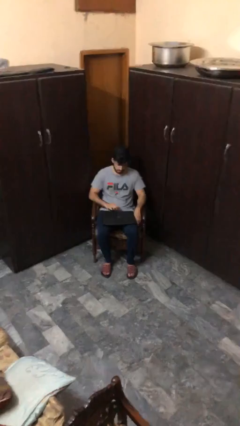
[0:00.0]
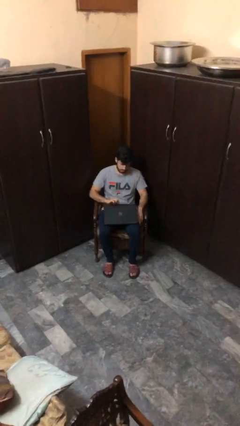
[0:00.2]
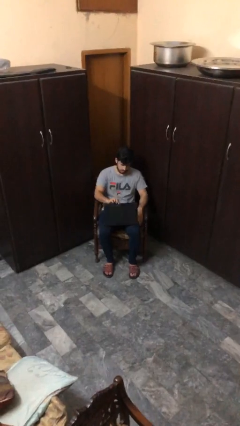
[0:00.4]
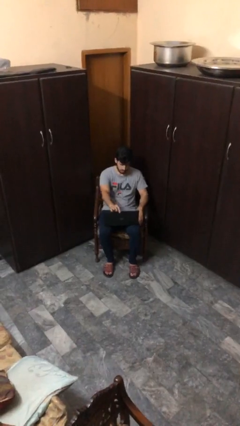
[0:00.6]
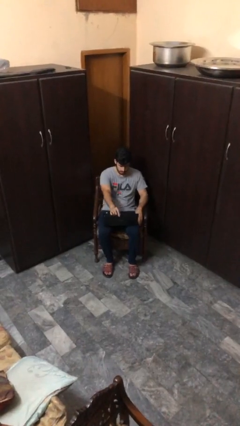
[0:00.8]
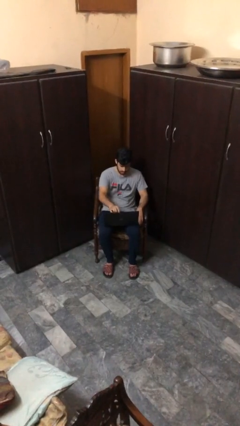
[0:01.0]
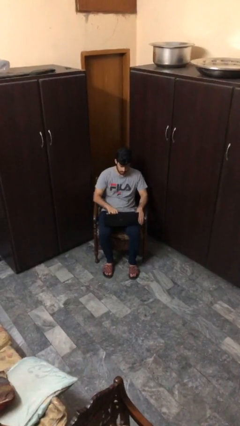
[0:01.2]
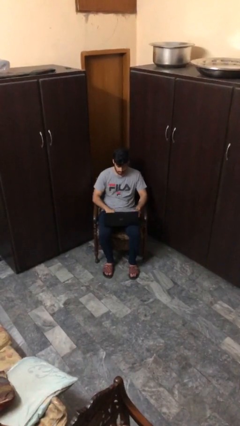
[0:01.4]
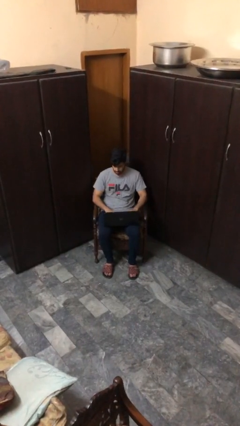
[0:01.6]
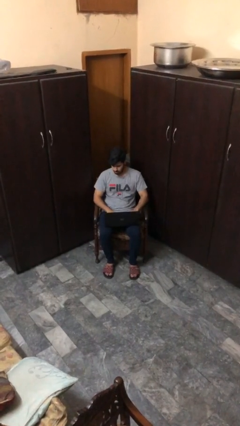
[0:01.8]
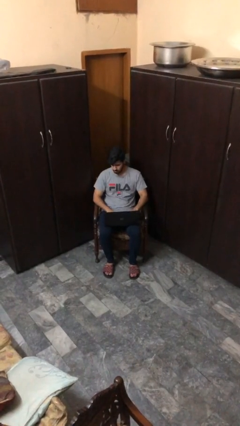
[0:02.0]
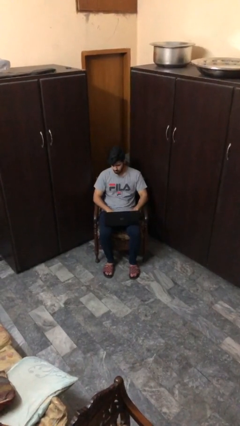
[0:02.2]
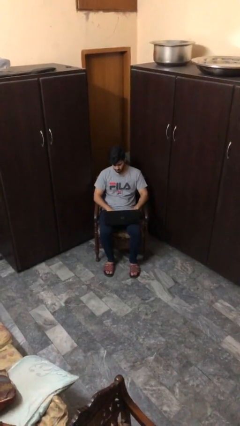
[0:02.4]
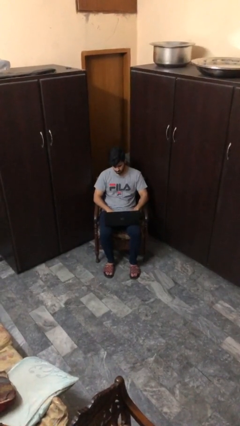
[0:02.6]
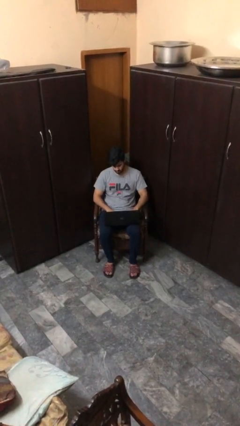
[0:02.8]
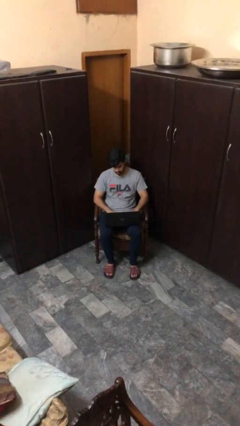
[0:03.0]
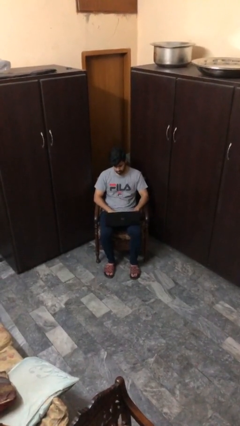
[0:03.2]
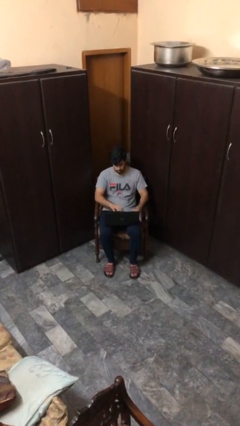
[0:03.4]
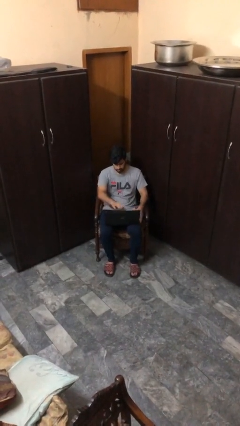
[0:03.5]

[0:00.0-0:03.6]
person opens laptop

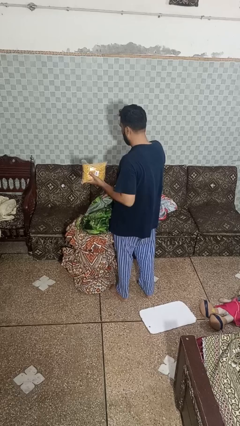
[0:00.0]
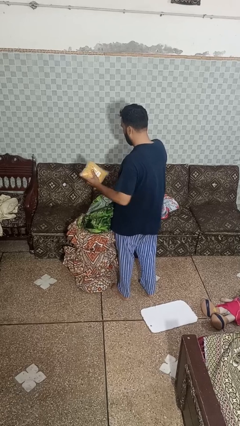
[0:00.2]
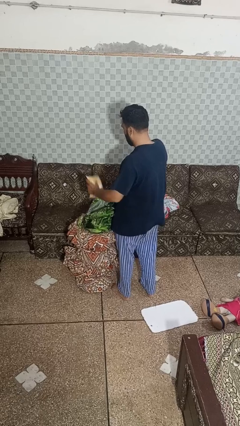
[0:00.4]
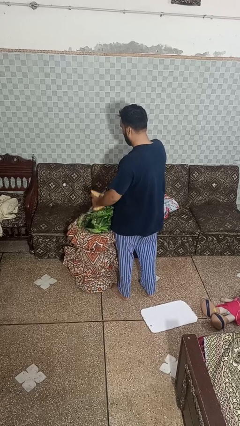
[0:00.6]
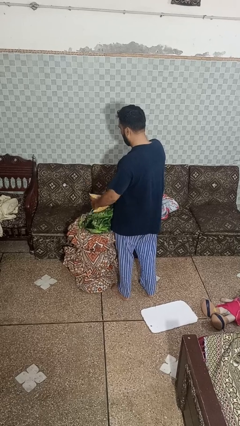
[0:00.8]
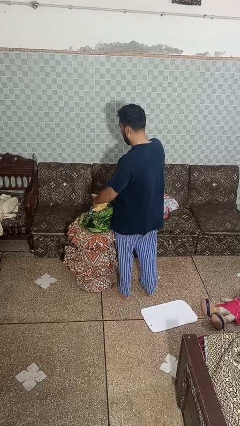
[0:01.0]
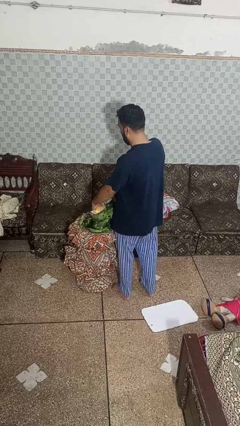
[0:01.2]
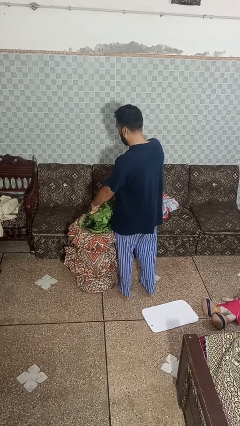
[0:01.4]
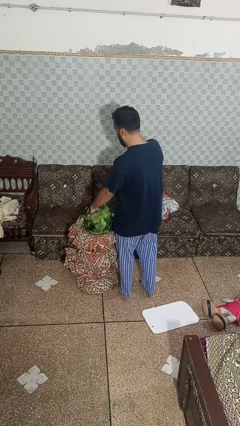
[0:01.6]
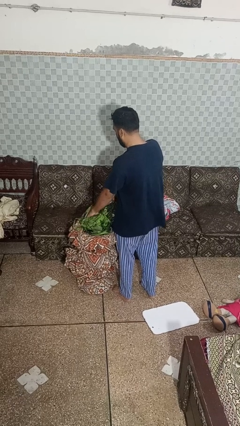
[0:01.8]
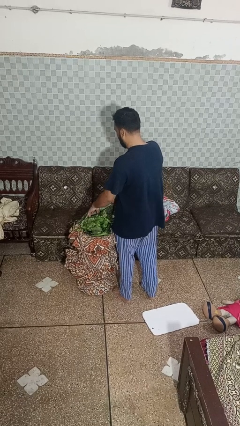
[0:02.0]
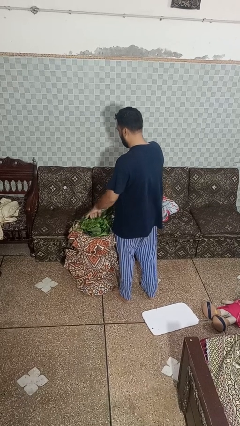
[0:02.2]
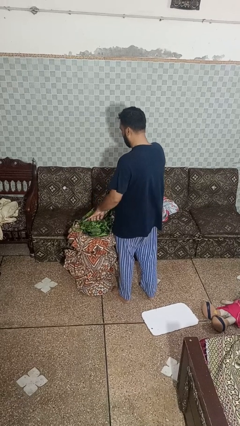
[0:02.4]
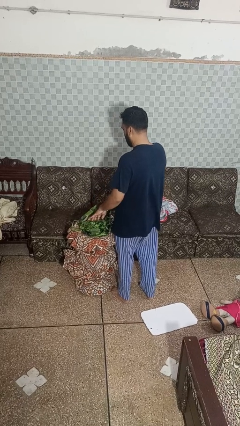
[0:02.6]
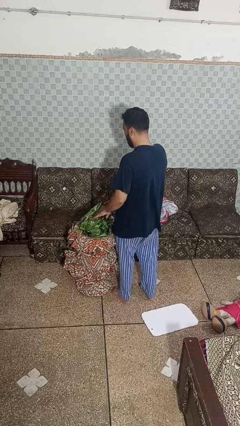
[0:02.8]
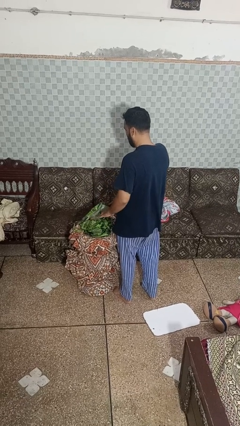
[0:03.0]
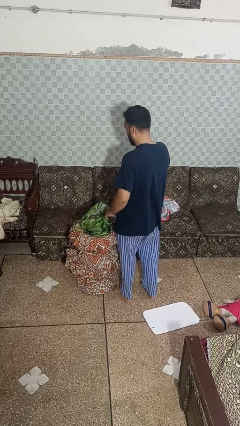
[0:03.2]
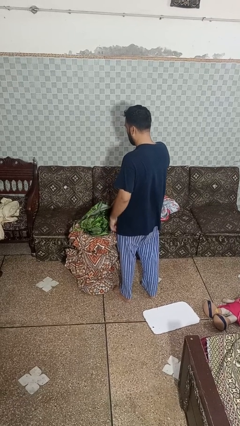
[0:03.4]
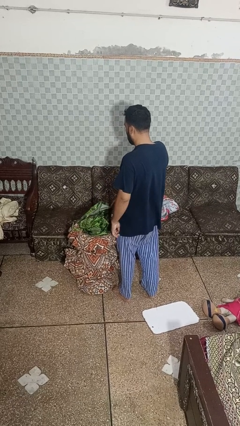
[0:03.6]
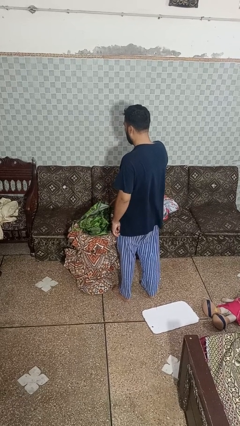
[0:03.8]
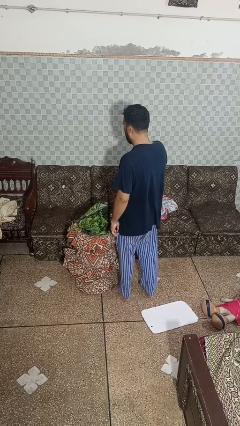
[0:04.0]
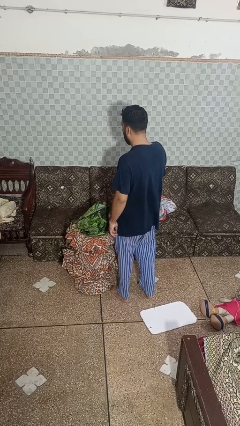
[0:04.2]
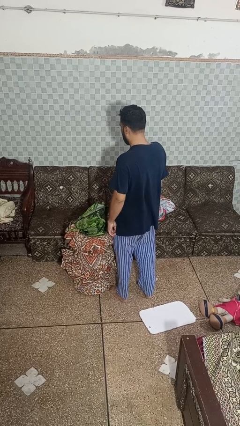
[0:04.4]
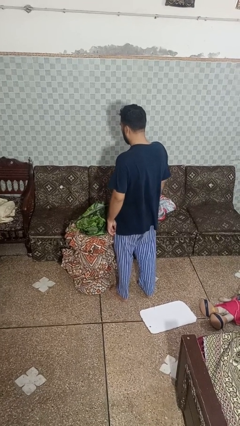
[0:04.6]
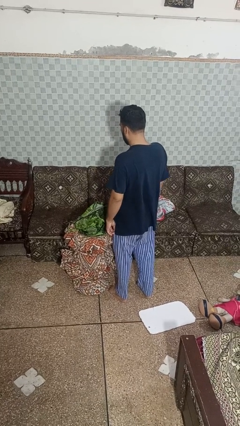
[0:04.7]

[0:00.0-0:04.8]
person puts object into bag

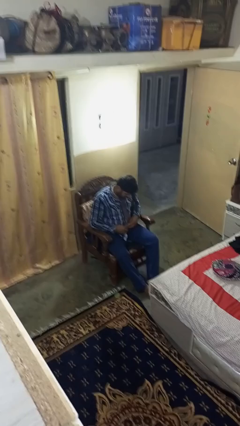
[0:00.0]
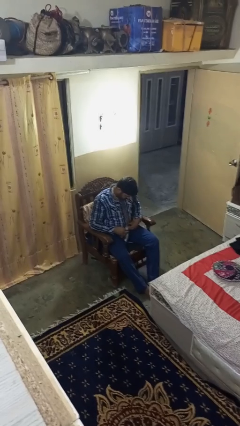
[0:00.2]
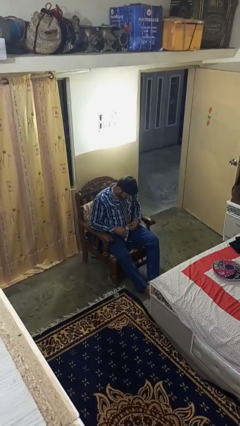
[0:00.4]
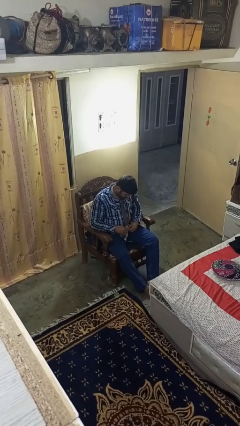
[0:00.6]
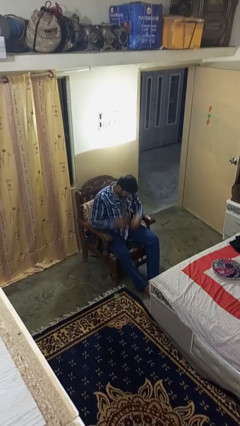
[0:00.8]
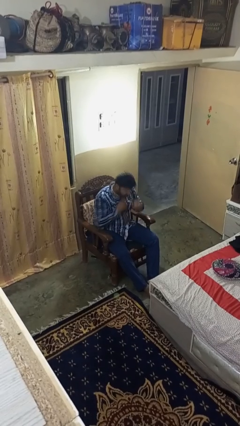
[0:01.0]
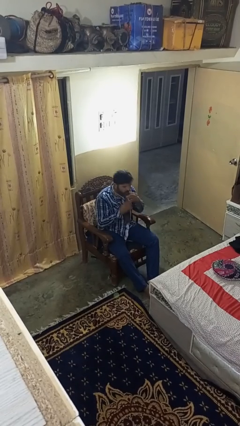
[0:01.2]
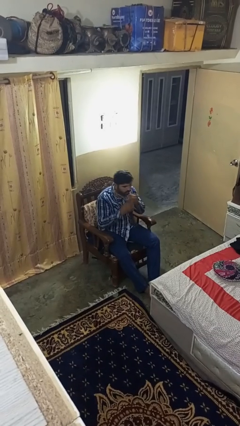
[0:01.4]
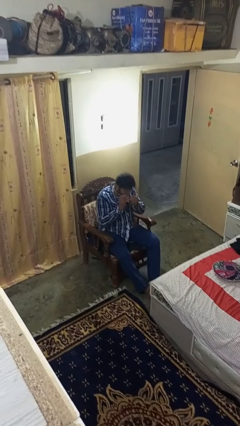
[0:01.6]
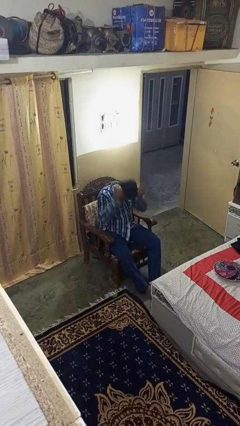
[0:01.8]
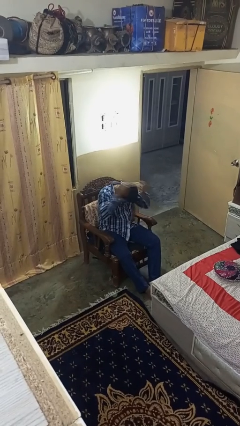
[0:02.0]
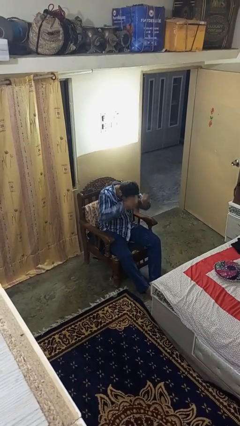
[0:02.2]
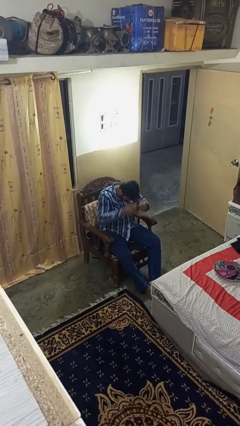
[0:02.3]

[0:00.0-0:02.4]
person takes off necktie

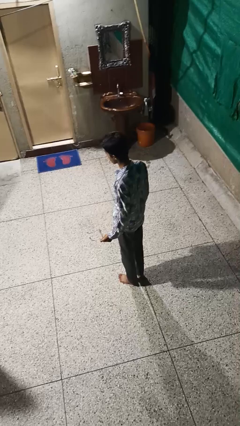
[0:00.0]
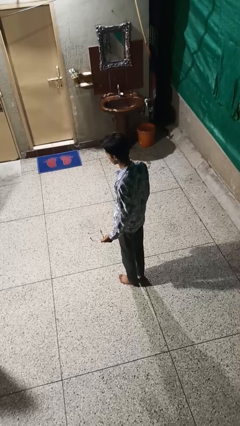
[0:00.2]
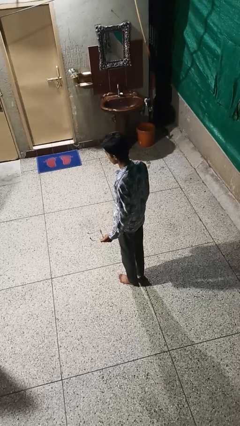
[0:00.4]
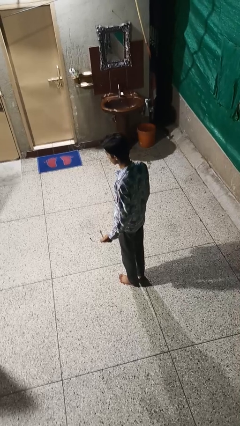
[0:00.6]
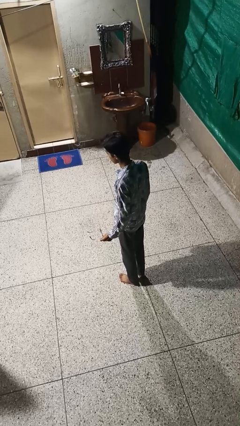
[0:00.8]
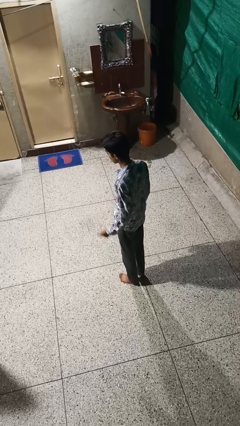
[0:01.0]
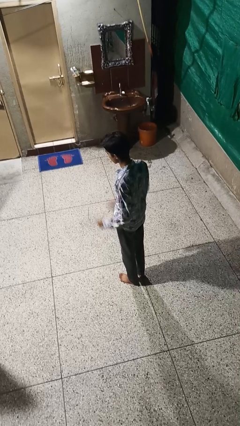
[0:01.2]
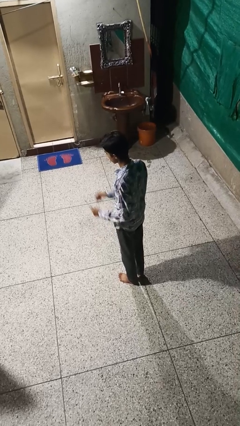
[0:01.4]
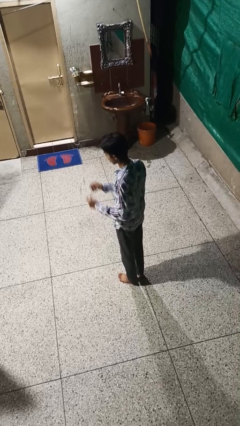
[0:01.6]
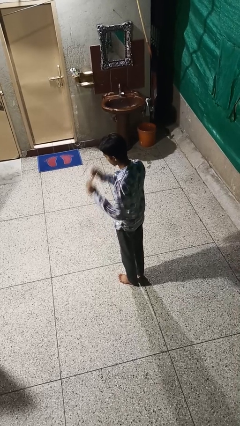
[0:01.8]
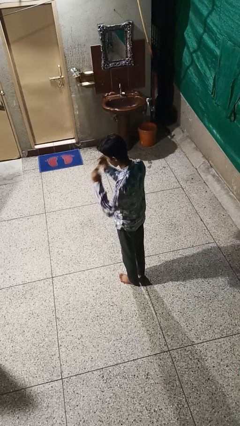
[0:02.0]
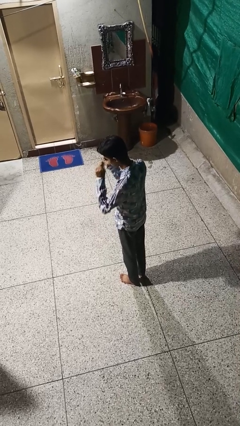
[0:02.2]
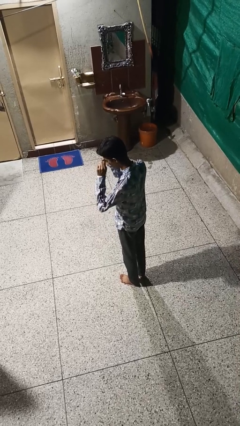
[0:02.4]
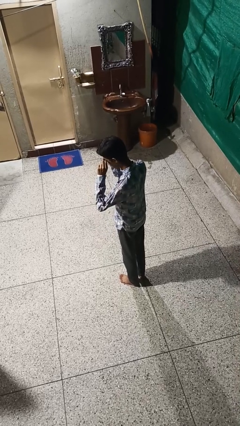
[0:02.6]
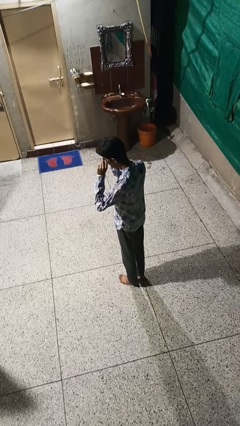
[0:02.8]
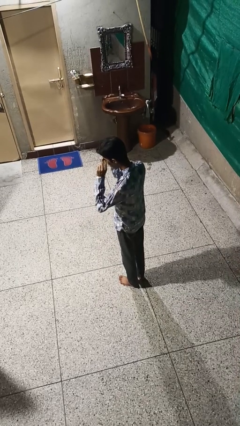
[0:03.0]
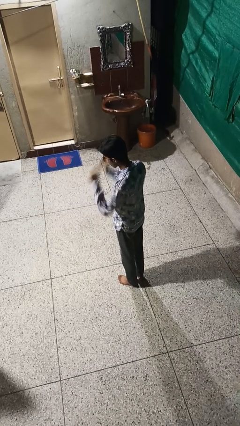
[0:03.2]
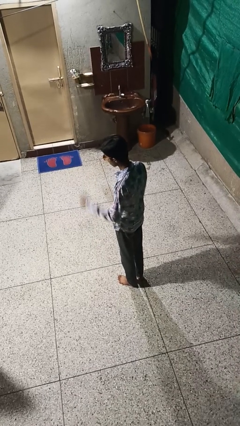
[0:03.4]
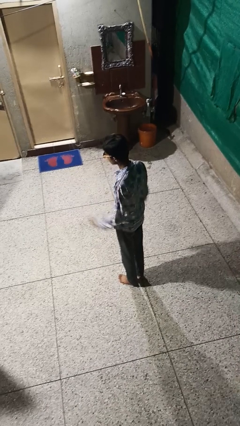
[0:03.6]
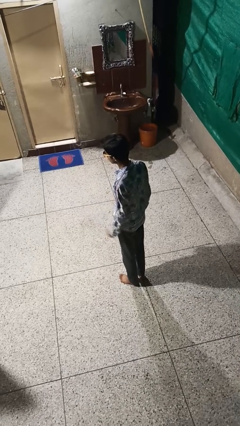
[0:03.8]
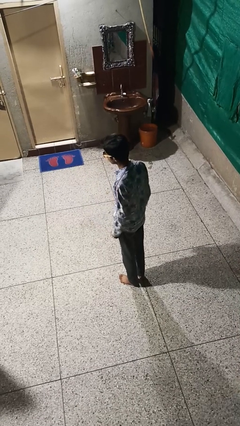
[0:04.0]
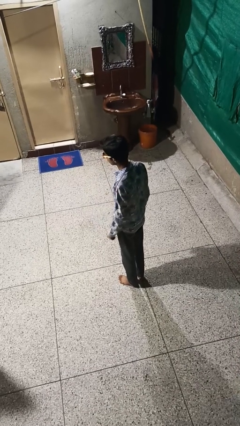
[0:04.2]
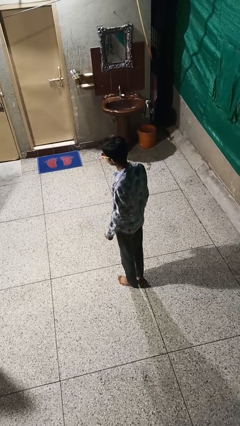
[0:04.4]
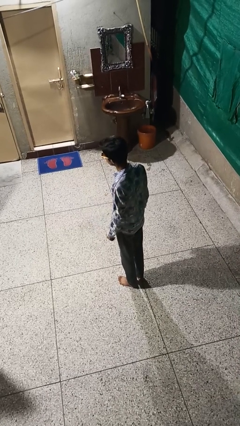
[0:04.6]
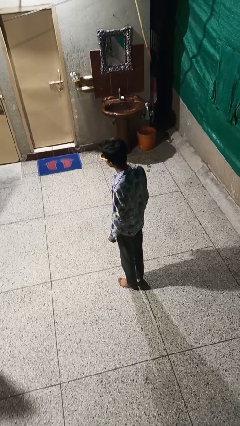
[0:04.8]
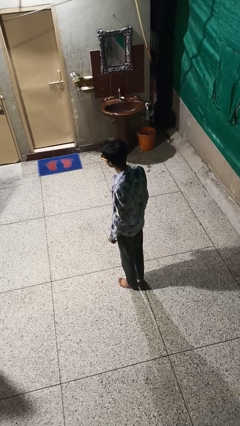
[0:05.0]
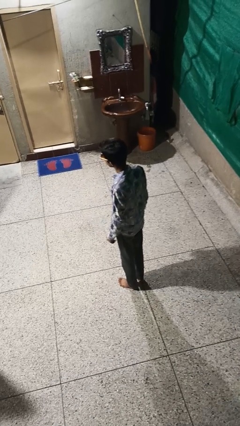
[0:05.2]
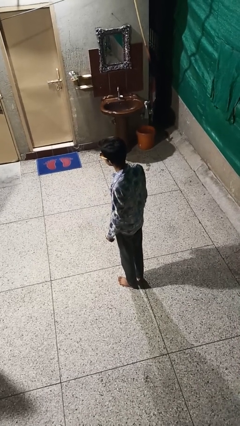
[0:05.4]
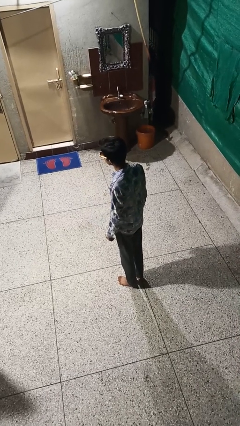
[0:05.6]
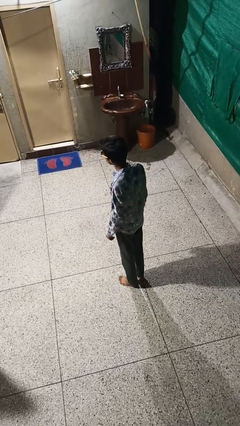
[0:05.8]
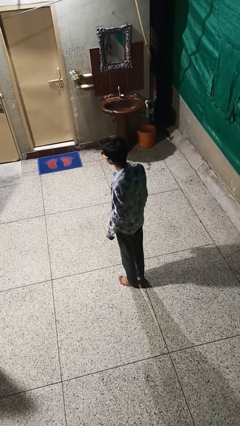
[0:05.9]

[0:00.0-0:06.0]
person puts on sunglasses

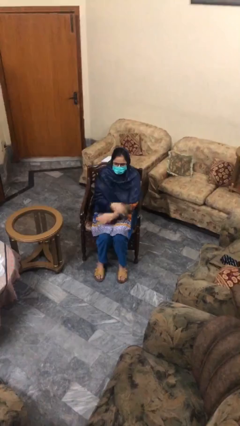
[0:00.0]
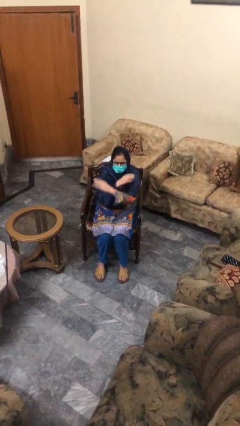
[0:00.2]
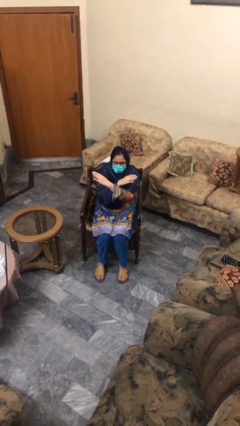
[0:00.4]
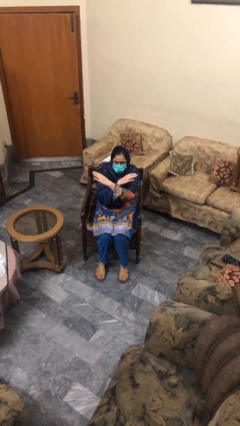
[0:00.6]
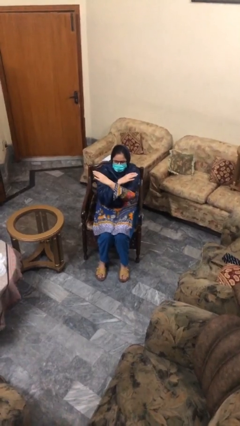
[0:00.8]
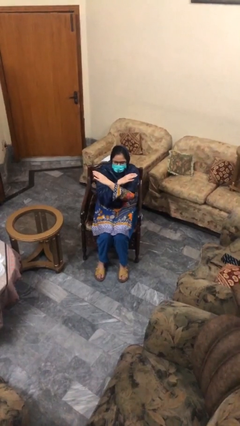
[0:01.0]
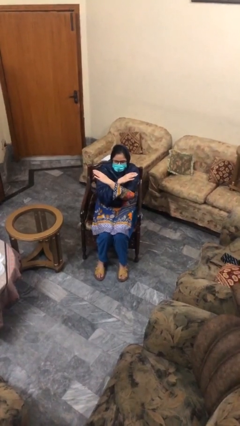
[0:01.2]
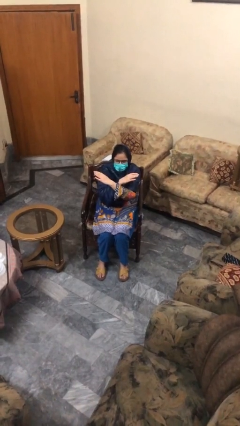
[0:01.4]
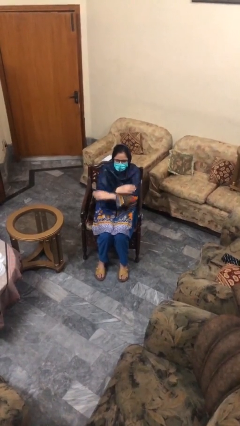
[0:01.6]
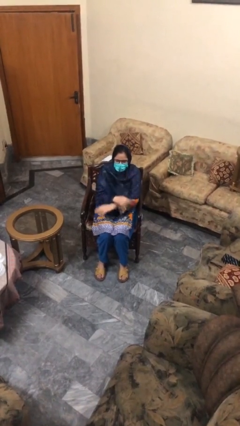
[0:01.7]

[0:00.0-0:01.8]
person gestures arms x
